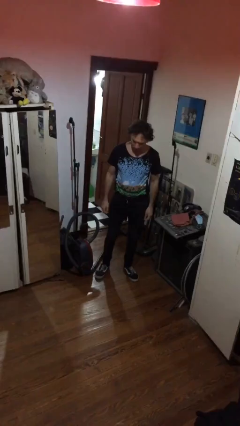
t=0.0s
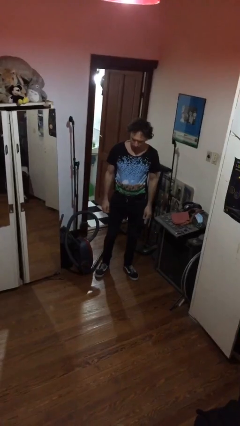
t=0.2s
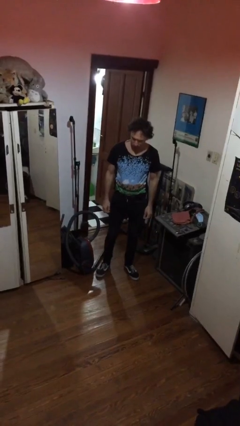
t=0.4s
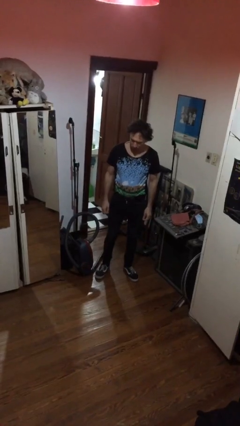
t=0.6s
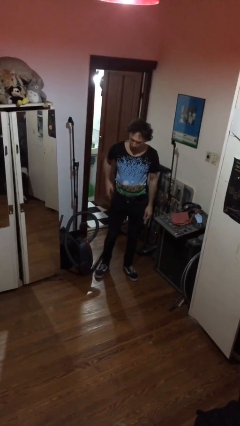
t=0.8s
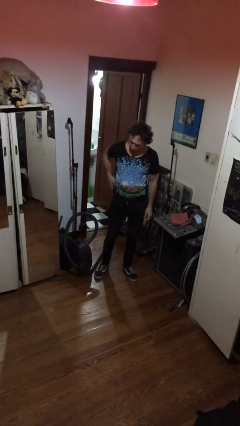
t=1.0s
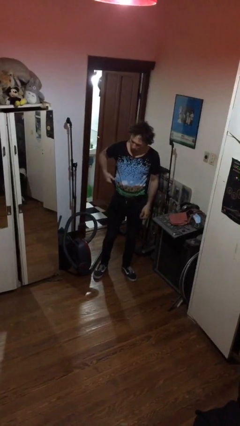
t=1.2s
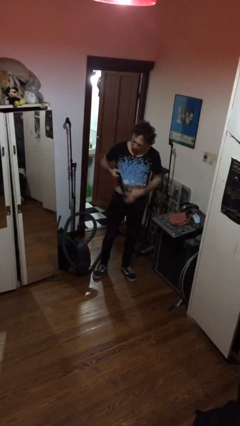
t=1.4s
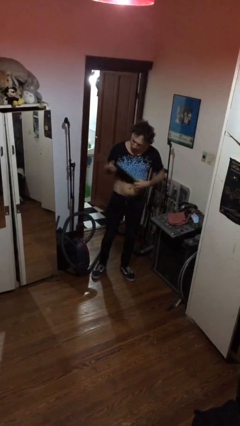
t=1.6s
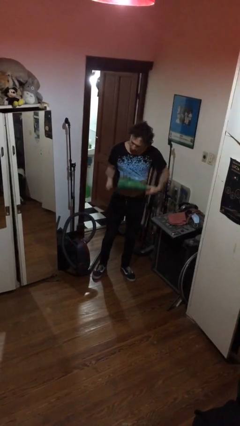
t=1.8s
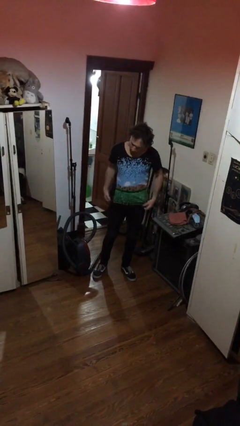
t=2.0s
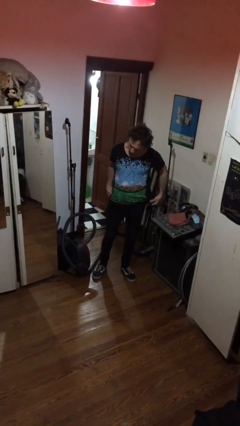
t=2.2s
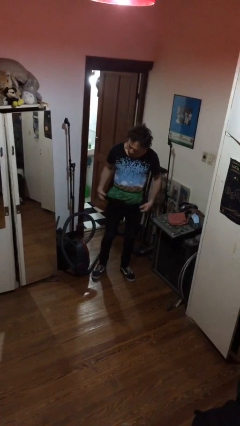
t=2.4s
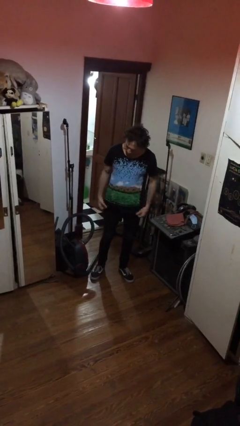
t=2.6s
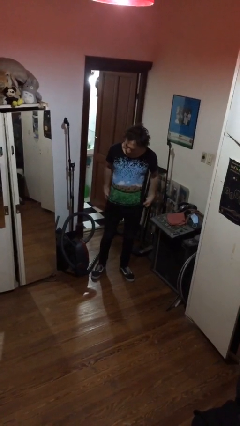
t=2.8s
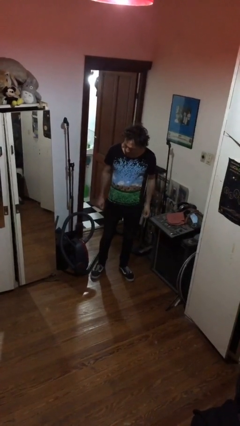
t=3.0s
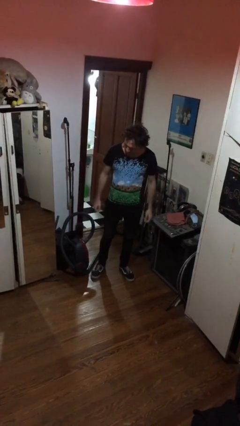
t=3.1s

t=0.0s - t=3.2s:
person untucks shirt

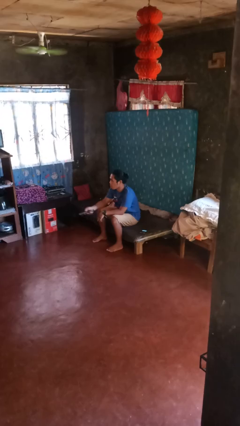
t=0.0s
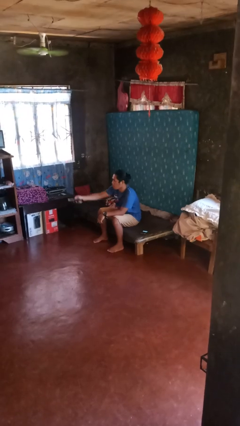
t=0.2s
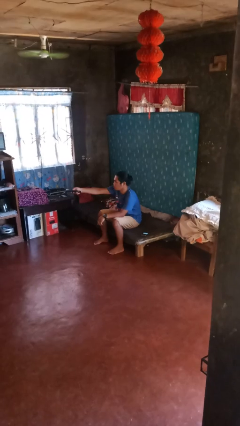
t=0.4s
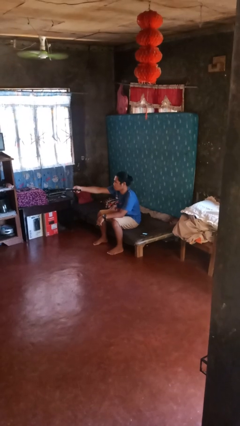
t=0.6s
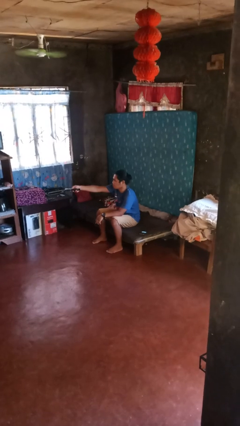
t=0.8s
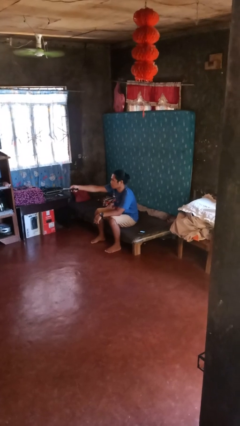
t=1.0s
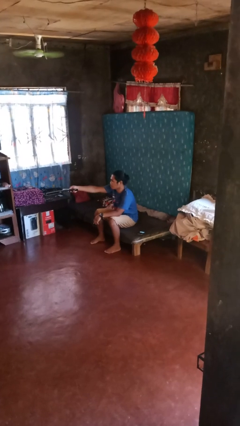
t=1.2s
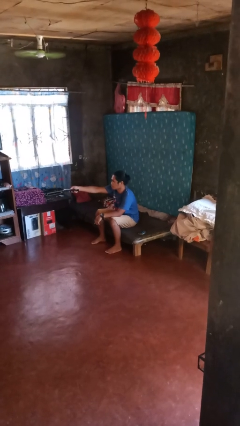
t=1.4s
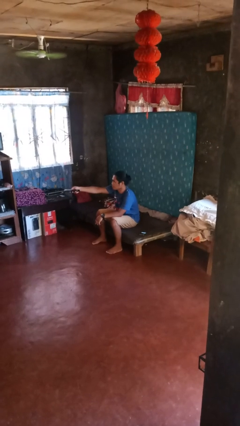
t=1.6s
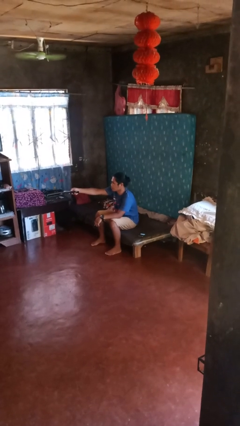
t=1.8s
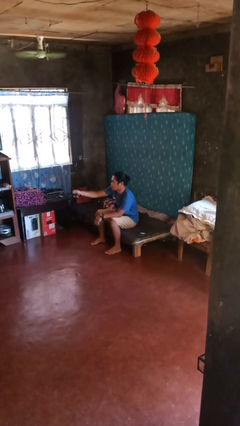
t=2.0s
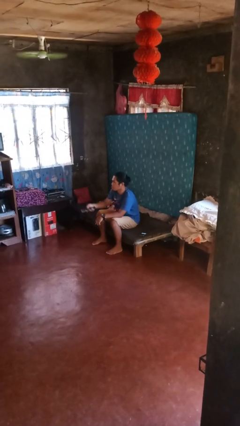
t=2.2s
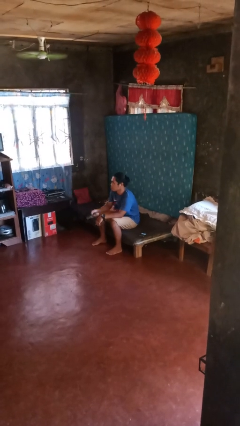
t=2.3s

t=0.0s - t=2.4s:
person uses television remote

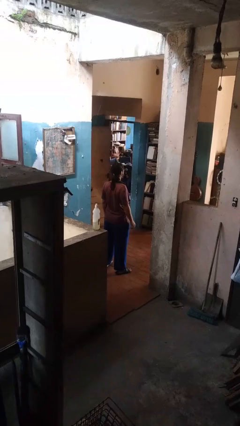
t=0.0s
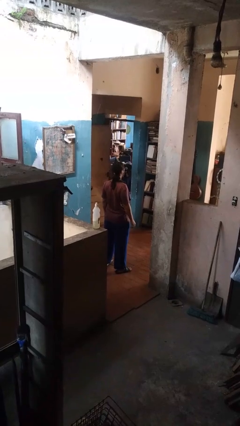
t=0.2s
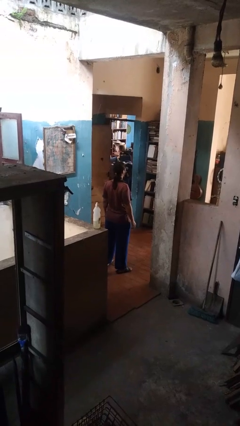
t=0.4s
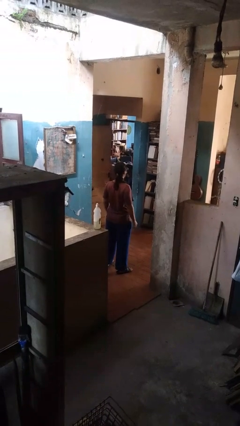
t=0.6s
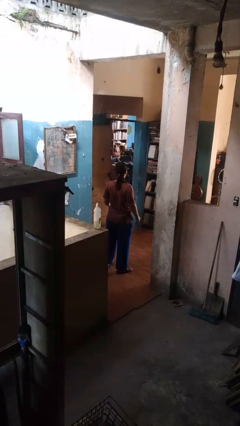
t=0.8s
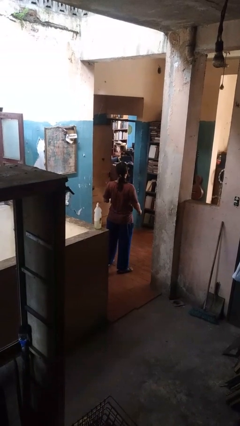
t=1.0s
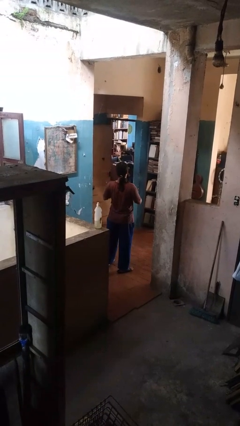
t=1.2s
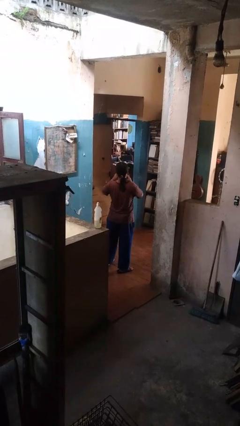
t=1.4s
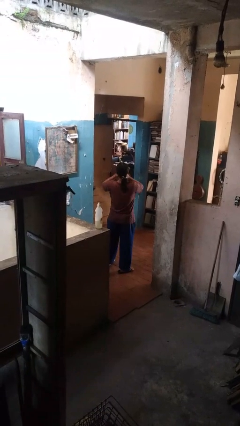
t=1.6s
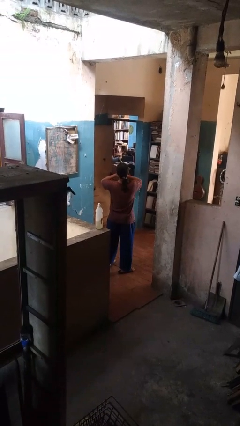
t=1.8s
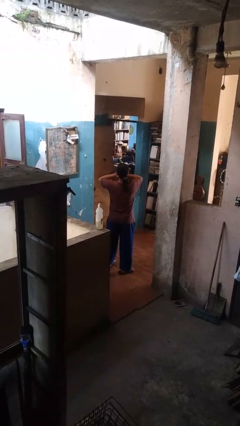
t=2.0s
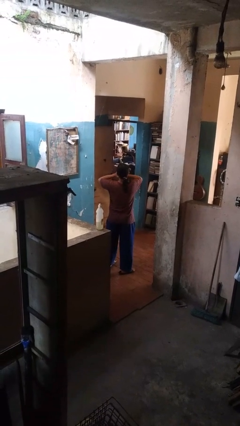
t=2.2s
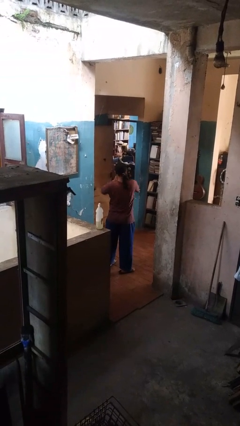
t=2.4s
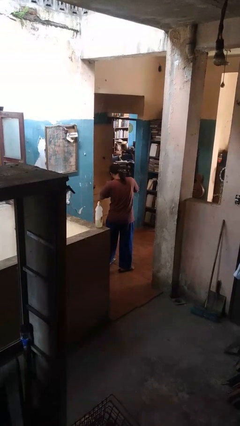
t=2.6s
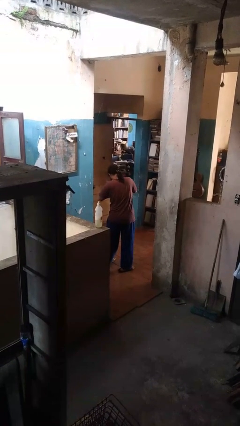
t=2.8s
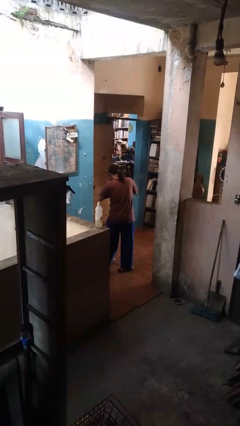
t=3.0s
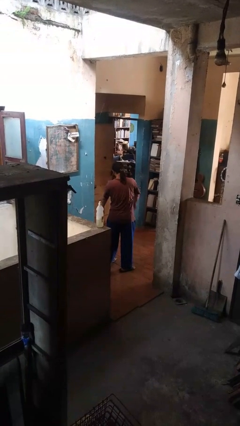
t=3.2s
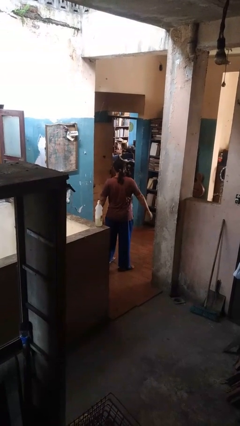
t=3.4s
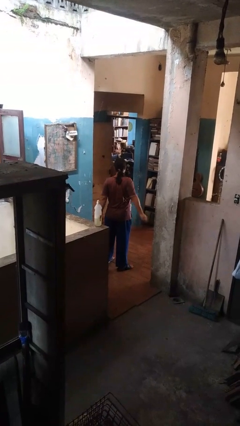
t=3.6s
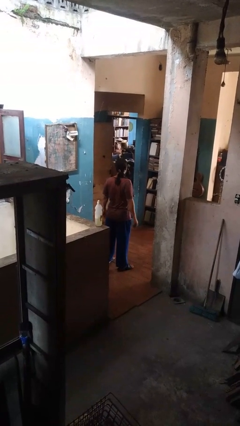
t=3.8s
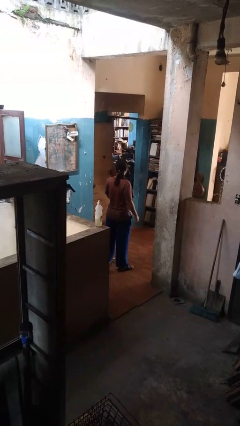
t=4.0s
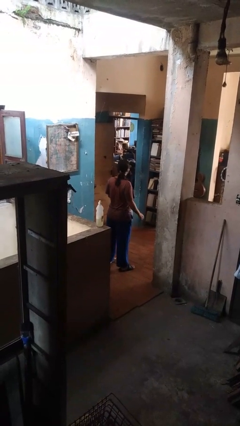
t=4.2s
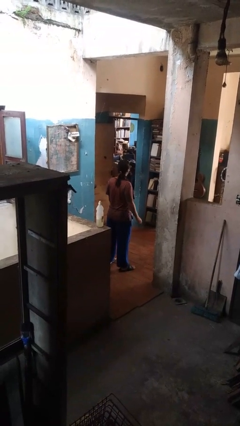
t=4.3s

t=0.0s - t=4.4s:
person sneezes into hand

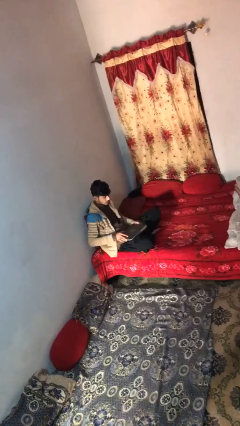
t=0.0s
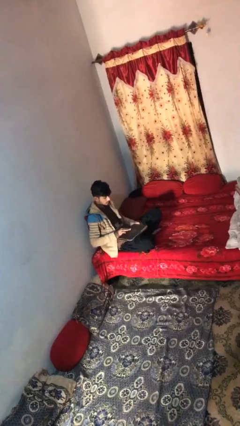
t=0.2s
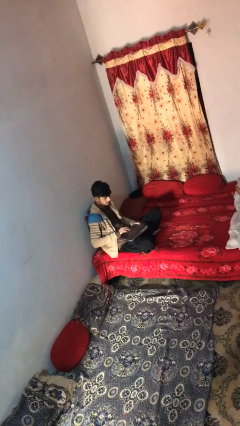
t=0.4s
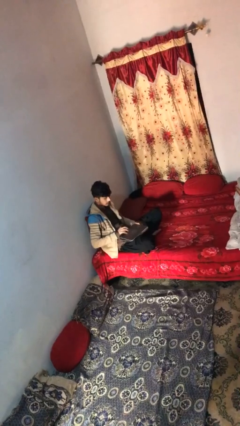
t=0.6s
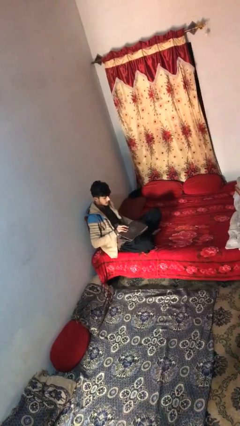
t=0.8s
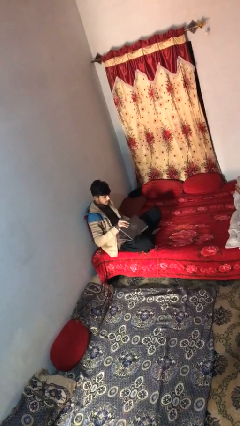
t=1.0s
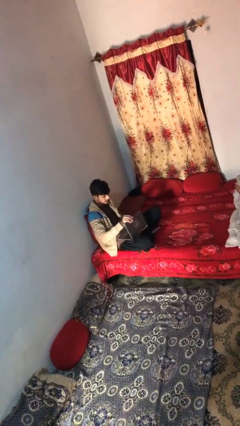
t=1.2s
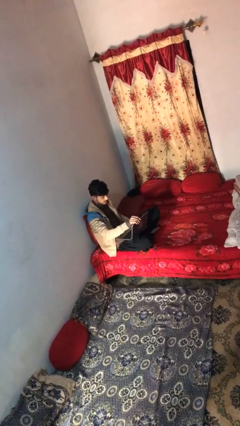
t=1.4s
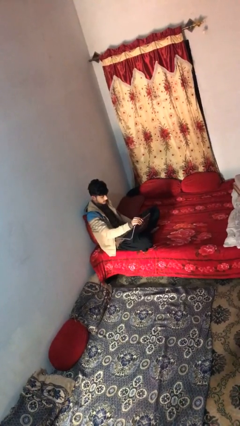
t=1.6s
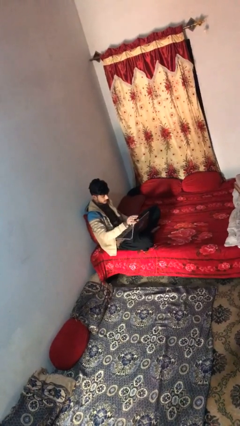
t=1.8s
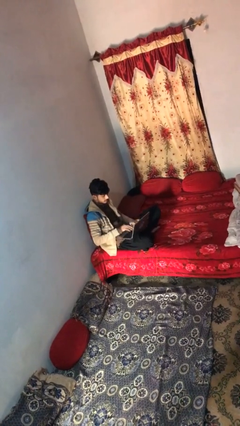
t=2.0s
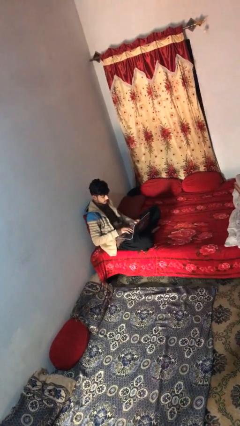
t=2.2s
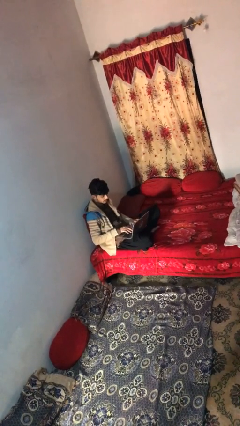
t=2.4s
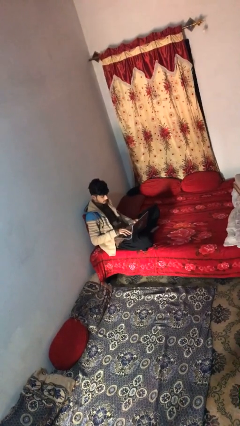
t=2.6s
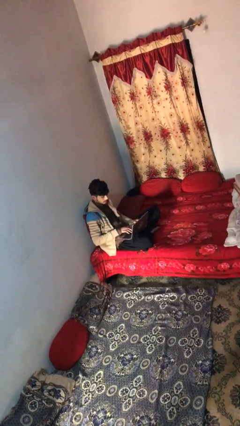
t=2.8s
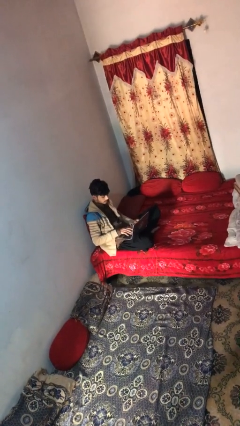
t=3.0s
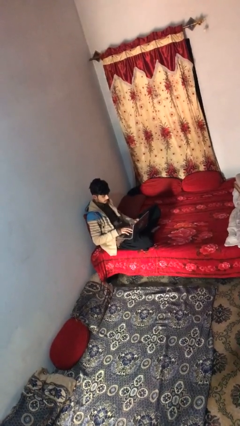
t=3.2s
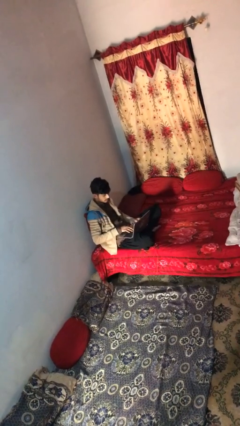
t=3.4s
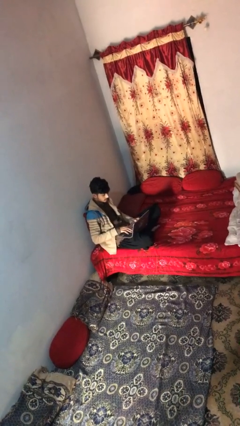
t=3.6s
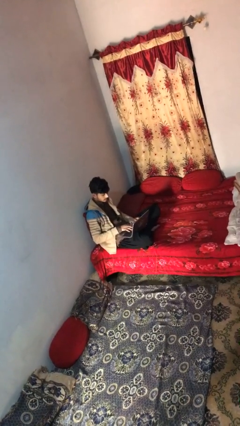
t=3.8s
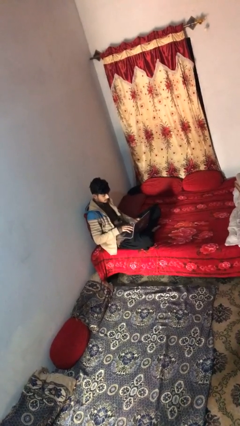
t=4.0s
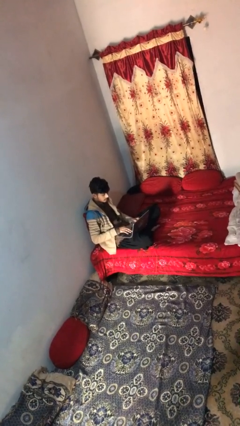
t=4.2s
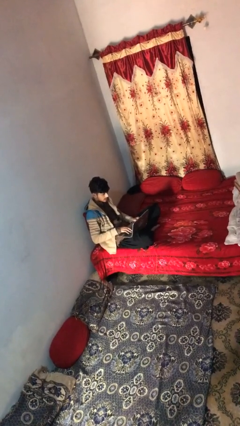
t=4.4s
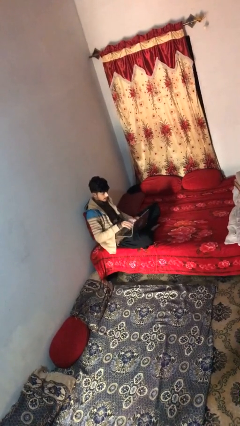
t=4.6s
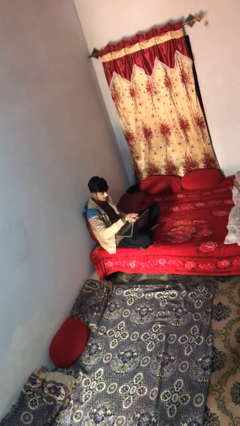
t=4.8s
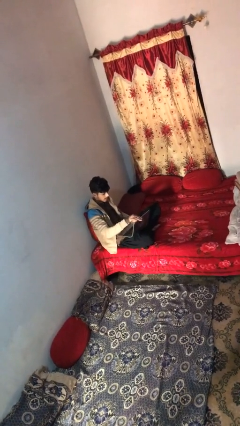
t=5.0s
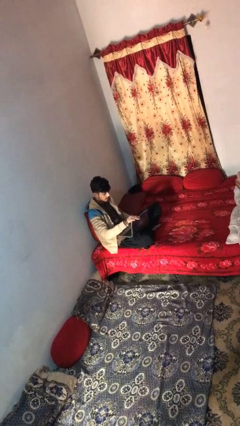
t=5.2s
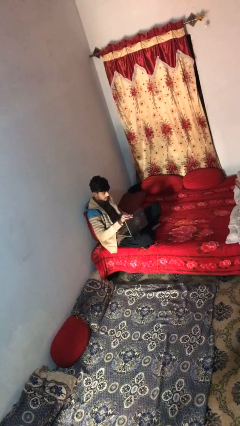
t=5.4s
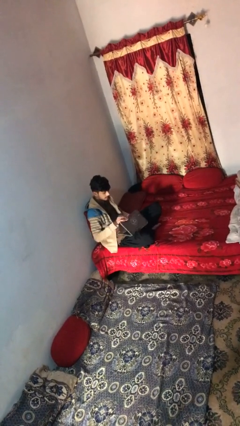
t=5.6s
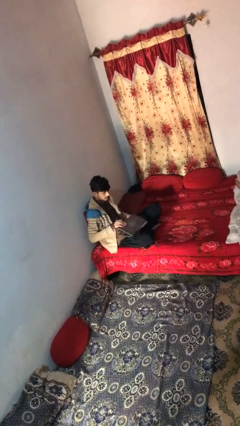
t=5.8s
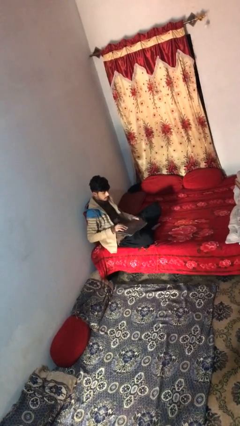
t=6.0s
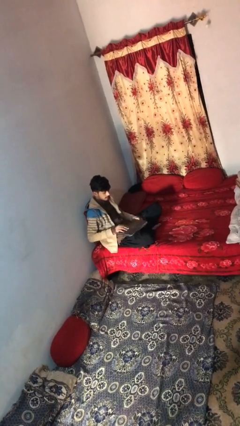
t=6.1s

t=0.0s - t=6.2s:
person interacts with laptop

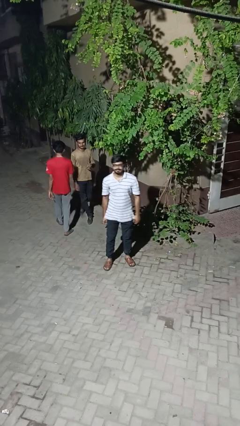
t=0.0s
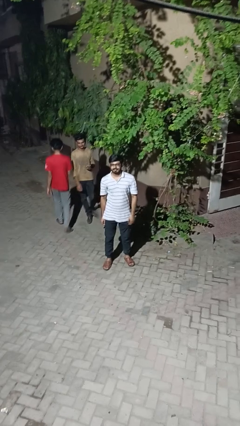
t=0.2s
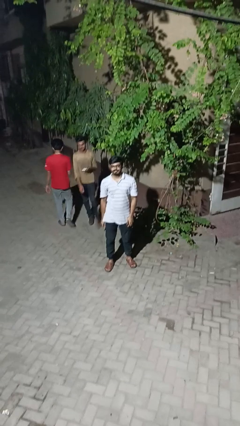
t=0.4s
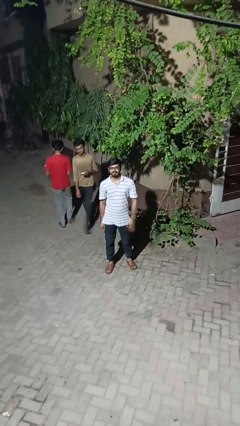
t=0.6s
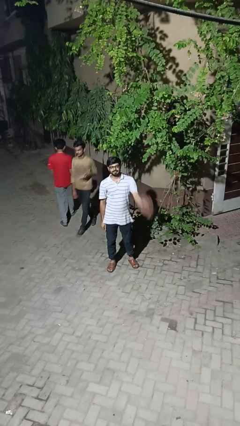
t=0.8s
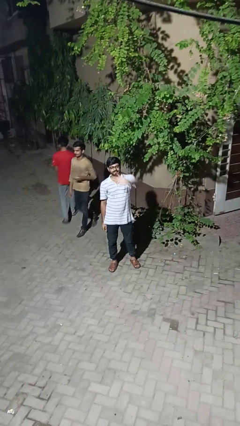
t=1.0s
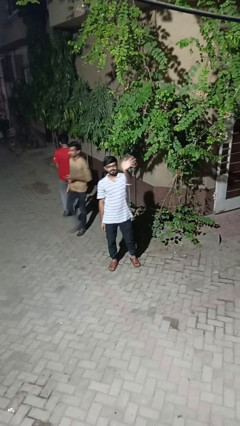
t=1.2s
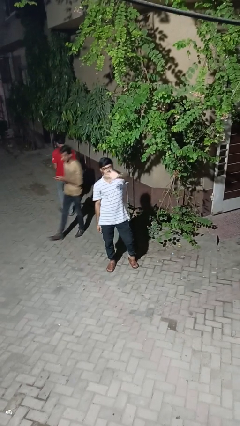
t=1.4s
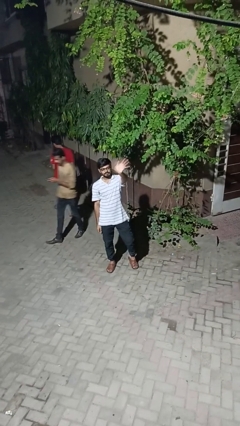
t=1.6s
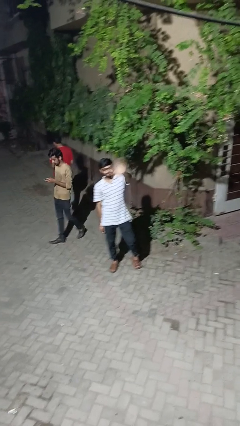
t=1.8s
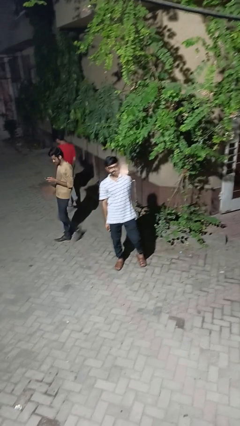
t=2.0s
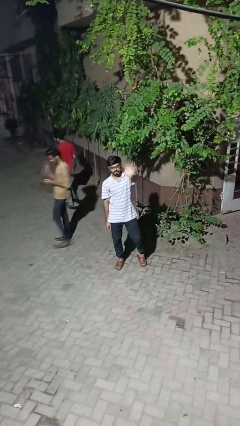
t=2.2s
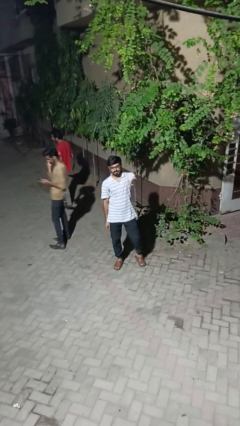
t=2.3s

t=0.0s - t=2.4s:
person waves at person
